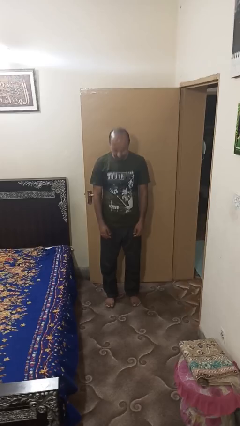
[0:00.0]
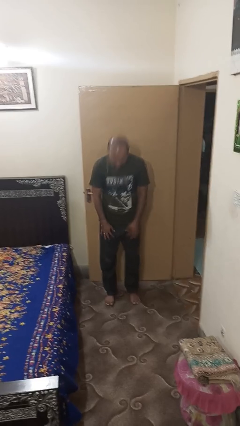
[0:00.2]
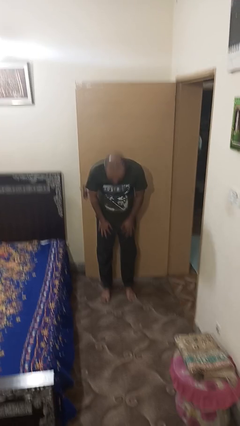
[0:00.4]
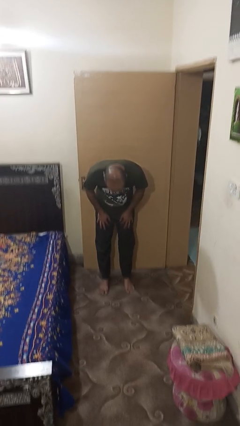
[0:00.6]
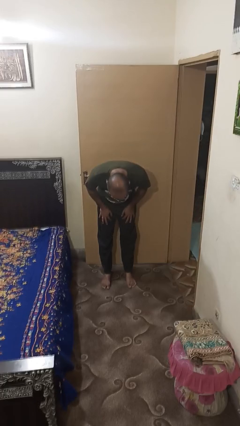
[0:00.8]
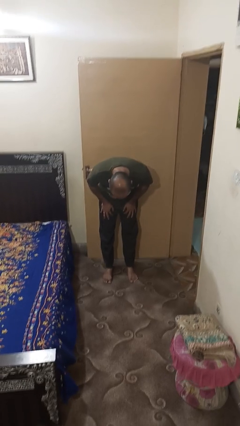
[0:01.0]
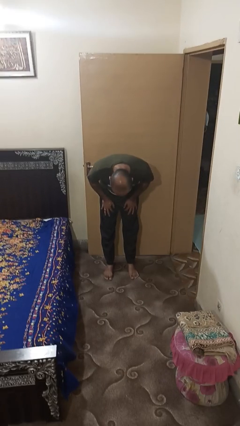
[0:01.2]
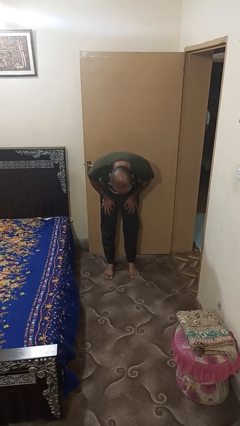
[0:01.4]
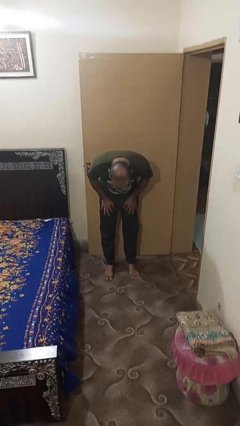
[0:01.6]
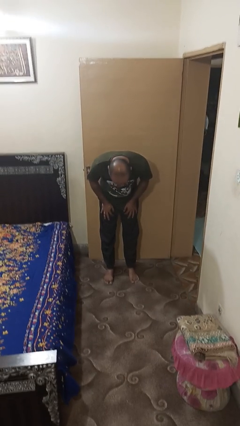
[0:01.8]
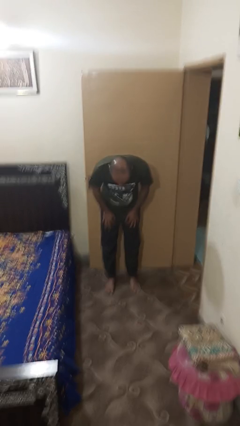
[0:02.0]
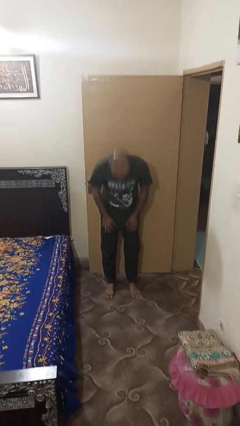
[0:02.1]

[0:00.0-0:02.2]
person bows

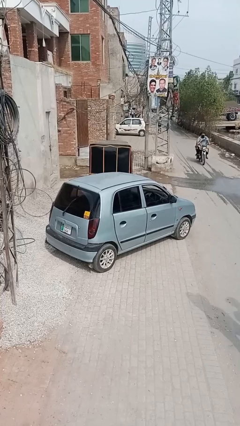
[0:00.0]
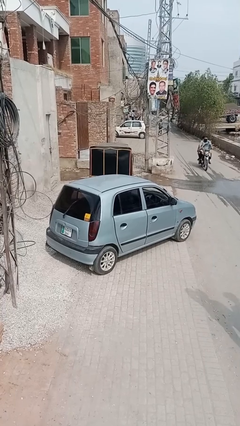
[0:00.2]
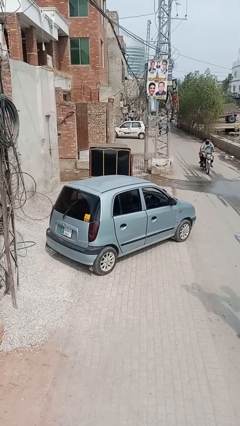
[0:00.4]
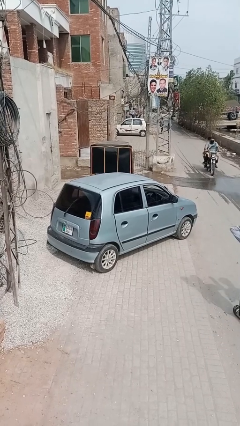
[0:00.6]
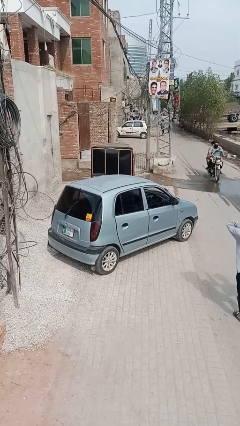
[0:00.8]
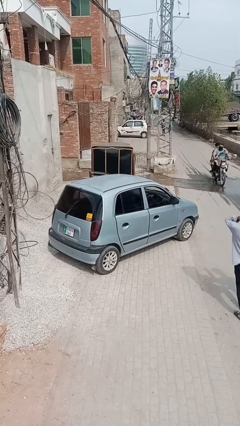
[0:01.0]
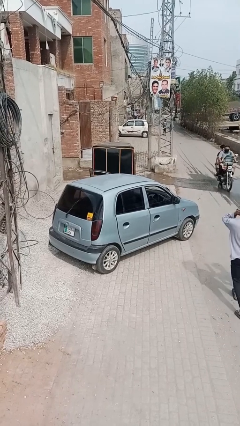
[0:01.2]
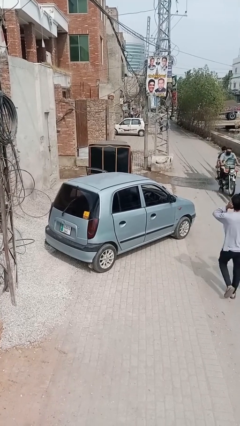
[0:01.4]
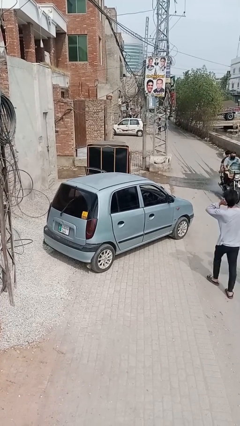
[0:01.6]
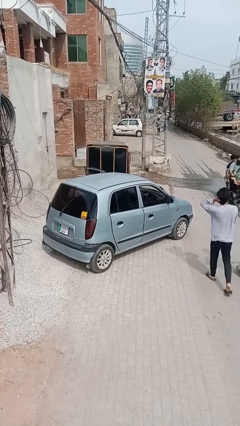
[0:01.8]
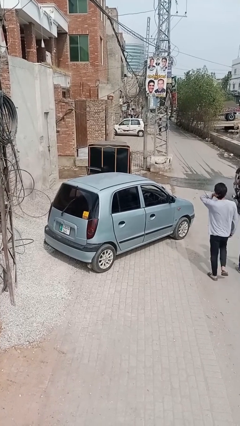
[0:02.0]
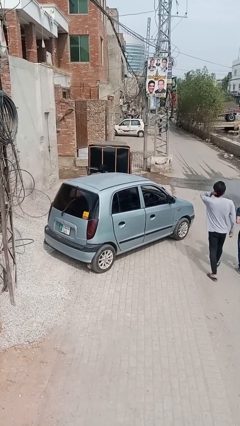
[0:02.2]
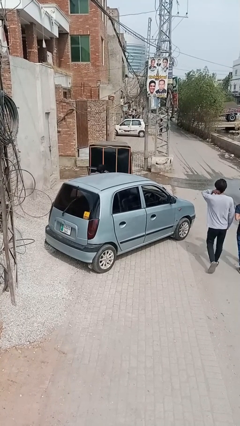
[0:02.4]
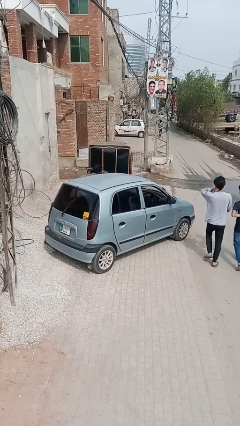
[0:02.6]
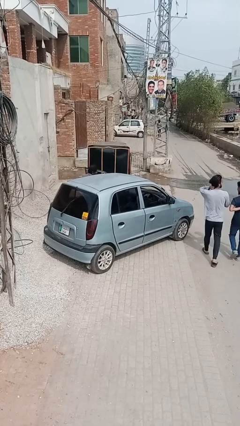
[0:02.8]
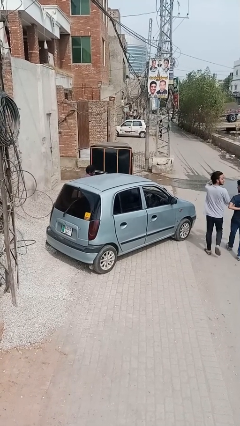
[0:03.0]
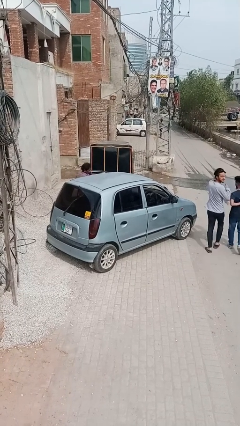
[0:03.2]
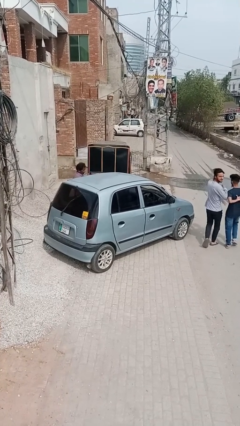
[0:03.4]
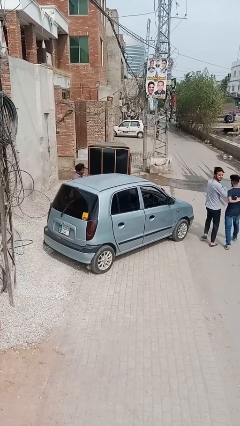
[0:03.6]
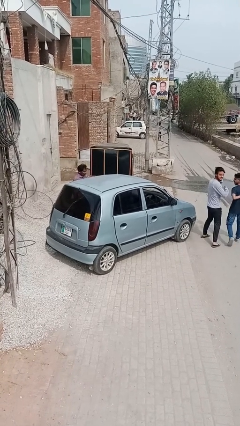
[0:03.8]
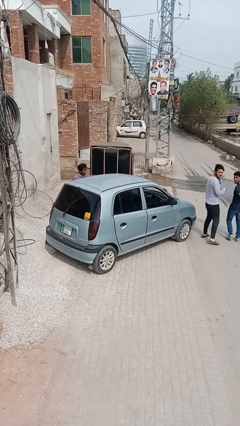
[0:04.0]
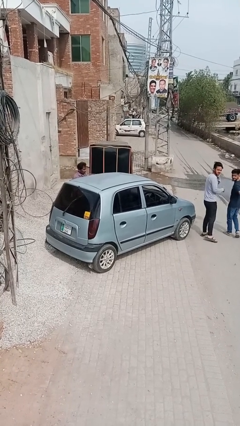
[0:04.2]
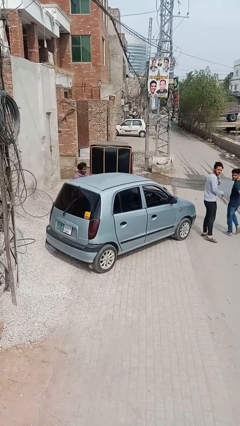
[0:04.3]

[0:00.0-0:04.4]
car drops off person

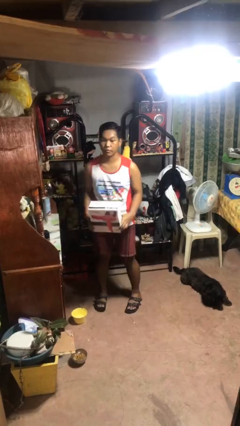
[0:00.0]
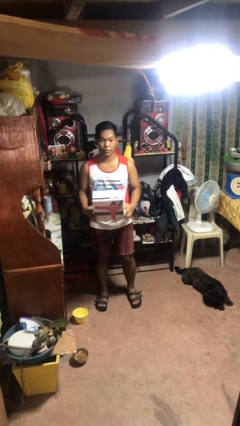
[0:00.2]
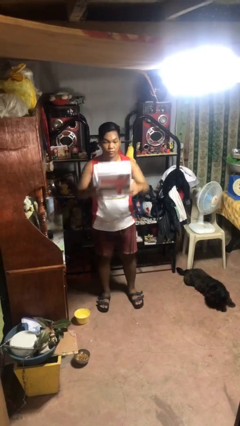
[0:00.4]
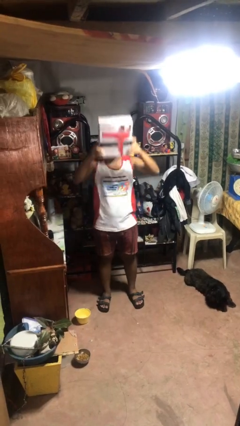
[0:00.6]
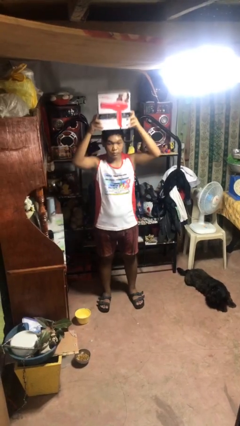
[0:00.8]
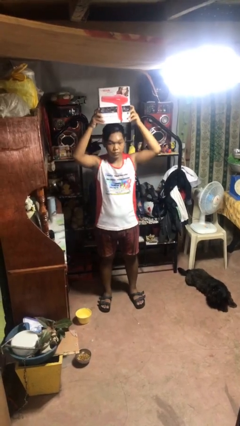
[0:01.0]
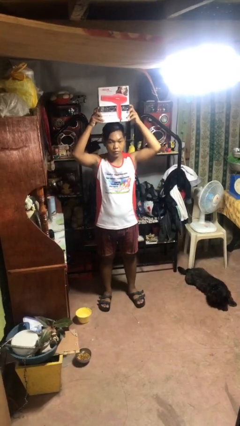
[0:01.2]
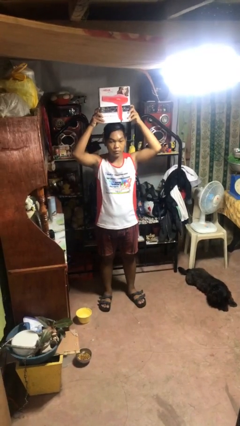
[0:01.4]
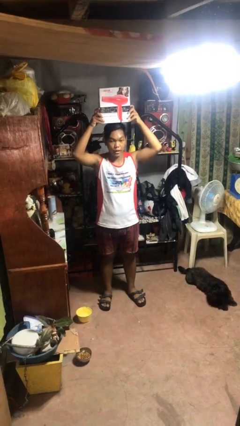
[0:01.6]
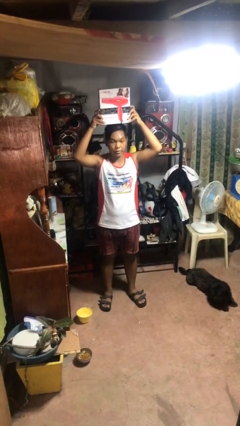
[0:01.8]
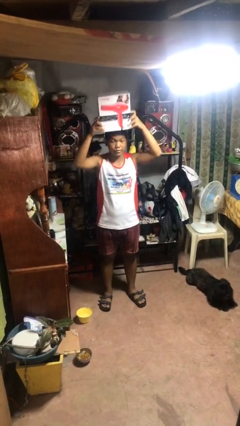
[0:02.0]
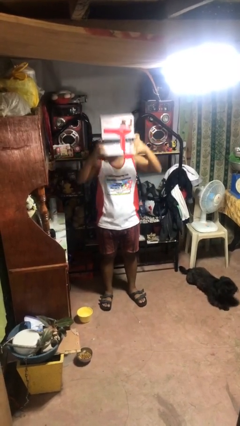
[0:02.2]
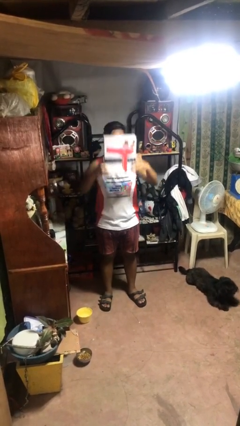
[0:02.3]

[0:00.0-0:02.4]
person holds object above head

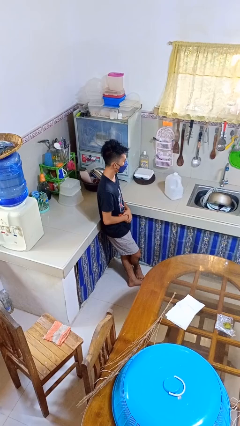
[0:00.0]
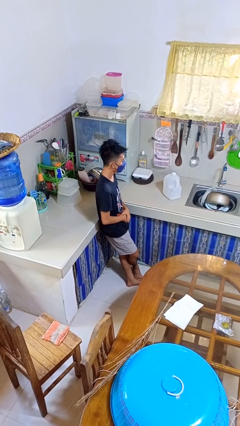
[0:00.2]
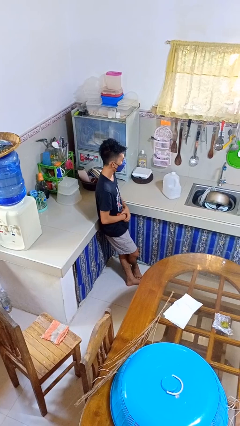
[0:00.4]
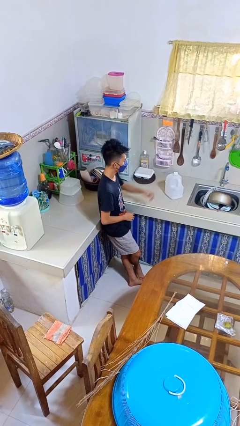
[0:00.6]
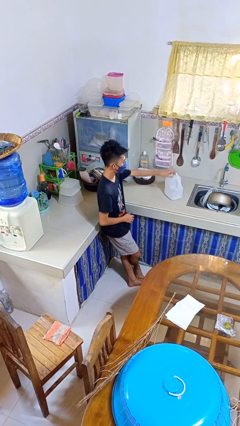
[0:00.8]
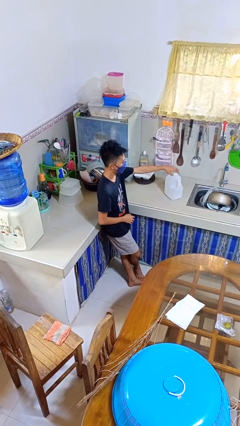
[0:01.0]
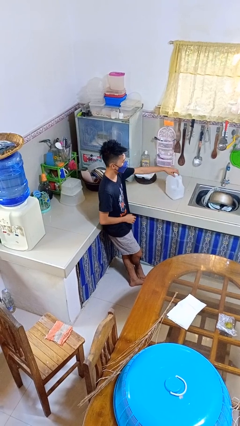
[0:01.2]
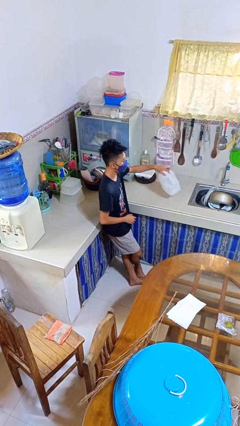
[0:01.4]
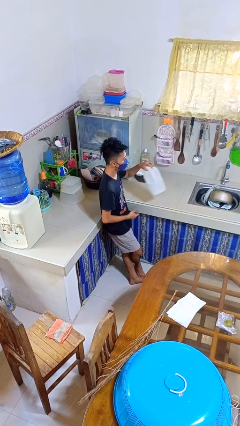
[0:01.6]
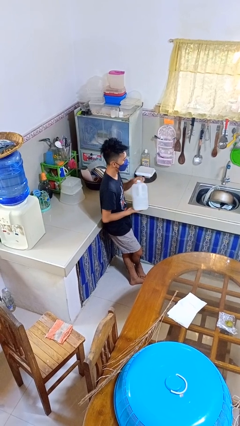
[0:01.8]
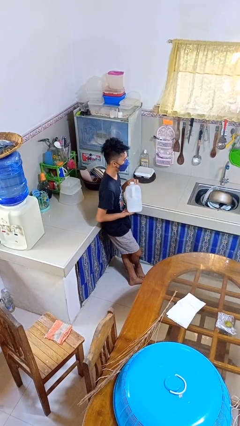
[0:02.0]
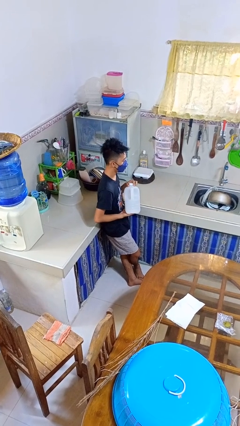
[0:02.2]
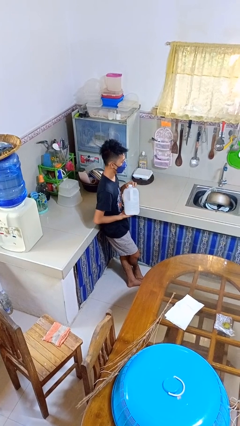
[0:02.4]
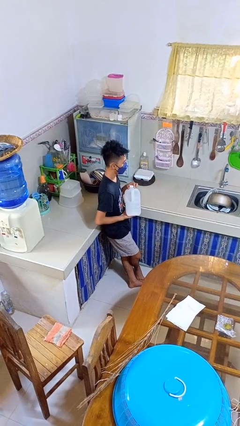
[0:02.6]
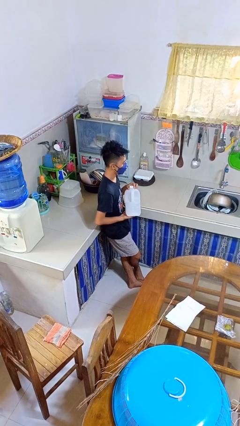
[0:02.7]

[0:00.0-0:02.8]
person picks up object from countertop

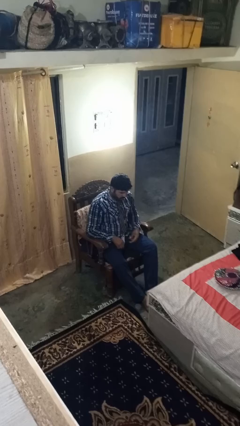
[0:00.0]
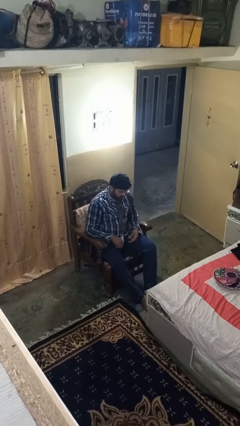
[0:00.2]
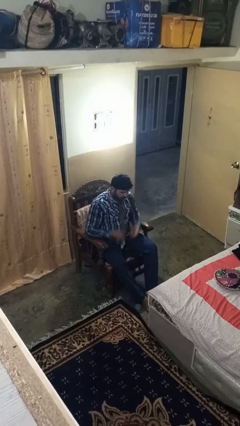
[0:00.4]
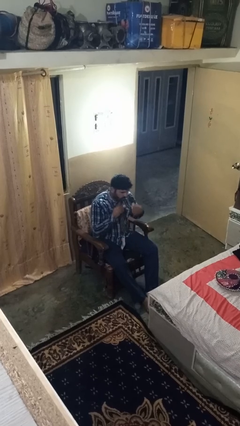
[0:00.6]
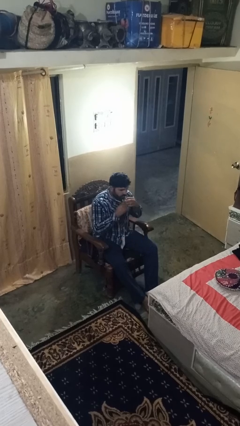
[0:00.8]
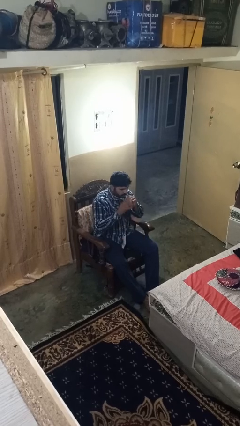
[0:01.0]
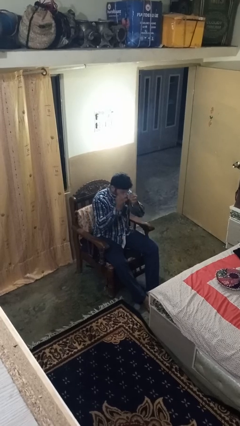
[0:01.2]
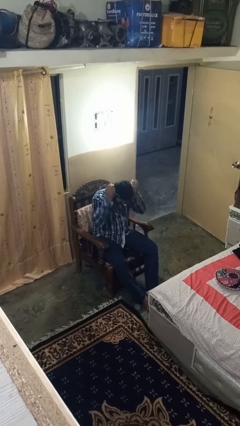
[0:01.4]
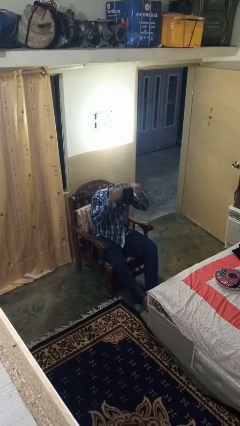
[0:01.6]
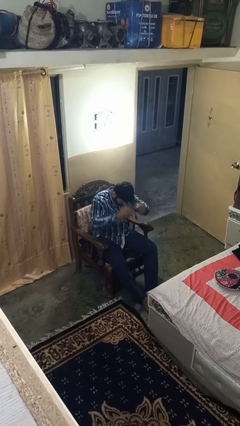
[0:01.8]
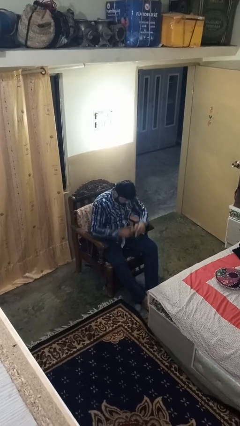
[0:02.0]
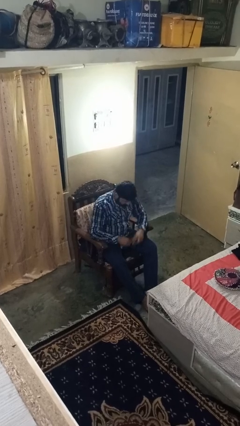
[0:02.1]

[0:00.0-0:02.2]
person takes off necktie

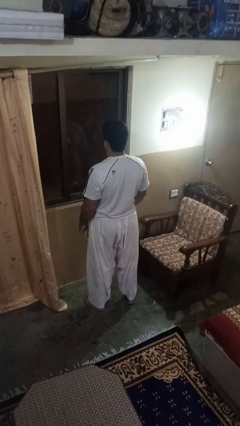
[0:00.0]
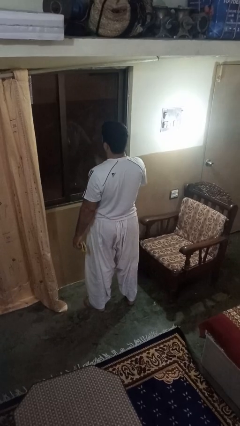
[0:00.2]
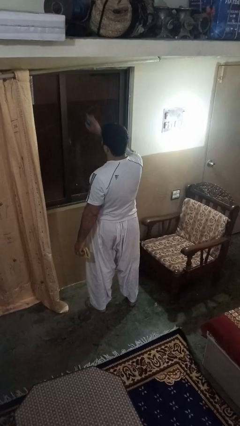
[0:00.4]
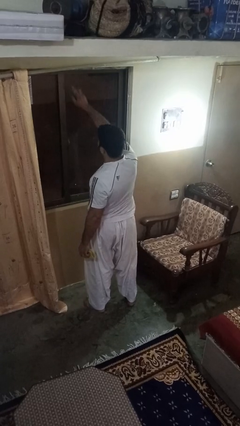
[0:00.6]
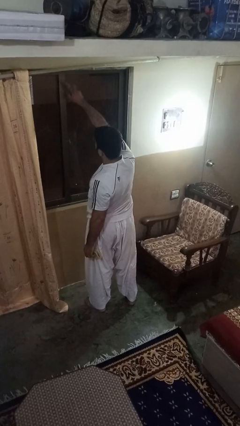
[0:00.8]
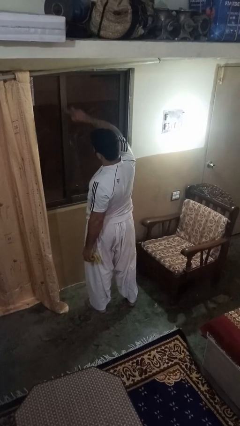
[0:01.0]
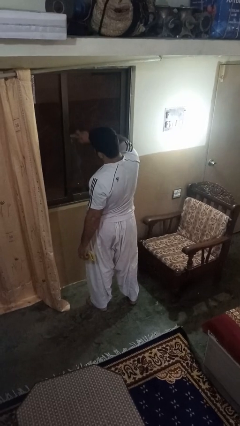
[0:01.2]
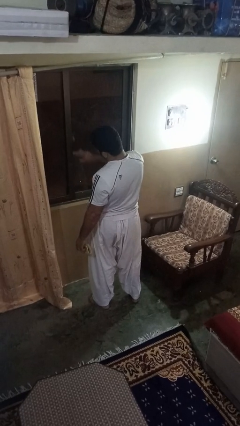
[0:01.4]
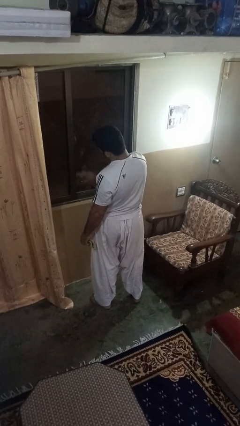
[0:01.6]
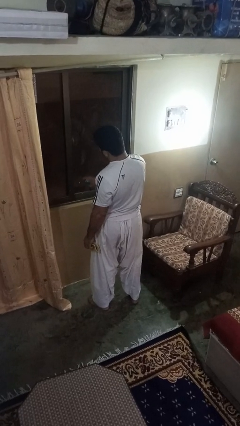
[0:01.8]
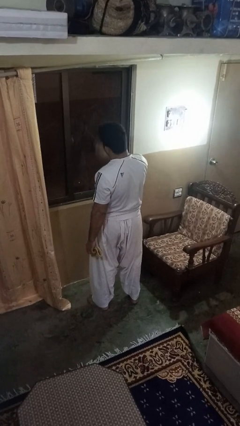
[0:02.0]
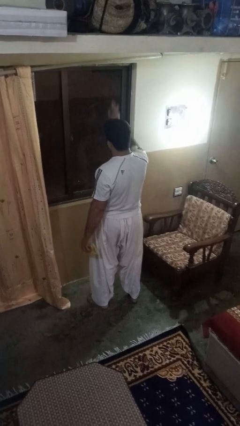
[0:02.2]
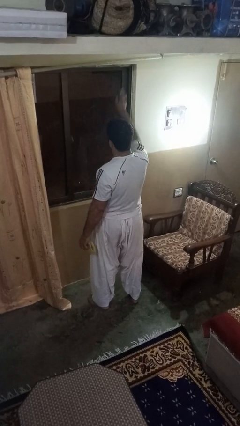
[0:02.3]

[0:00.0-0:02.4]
person sprays from bottle

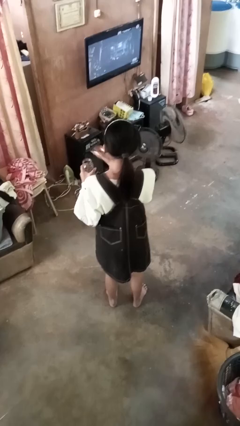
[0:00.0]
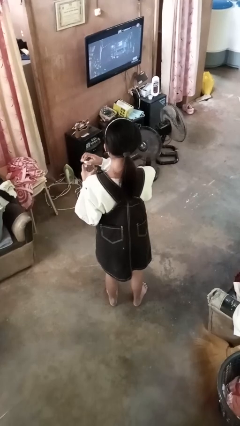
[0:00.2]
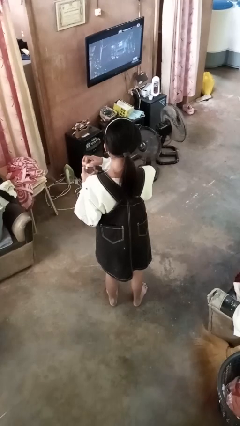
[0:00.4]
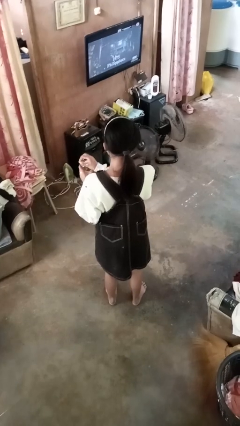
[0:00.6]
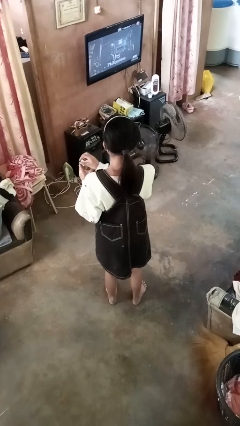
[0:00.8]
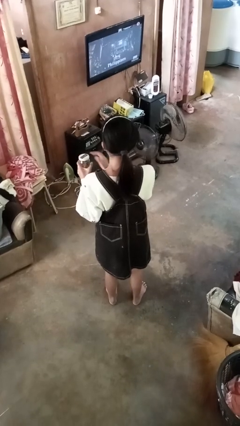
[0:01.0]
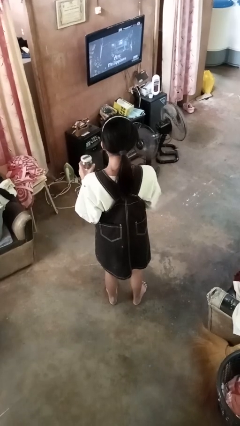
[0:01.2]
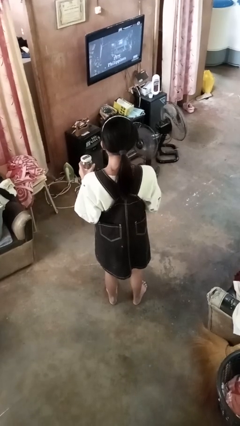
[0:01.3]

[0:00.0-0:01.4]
person closes jar
